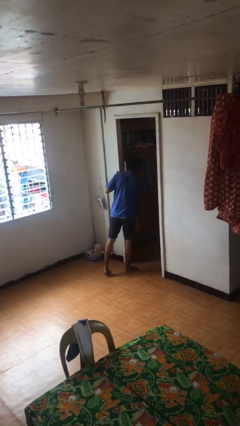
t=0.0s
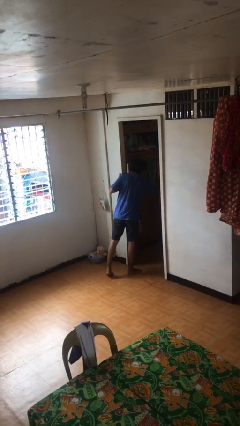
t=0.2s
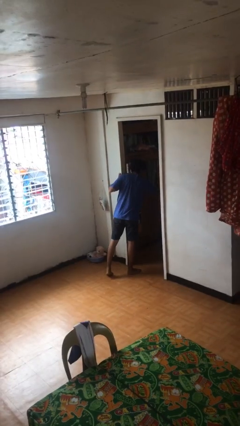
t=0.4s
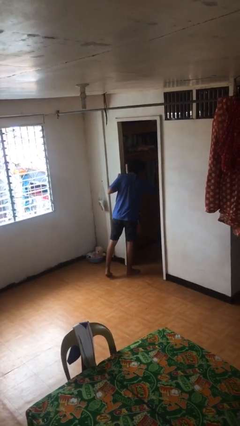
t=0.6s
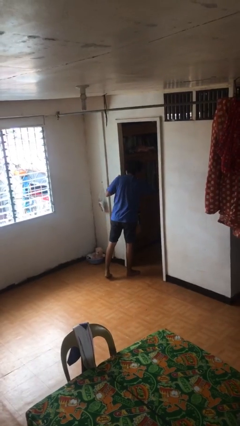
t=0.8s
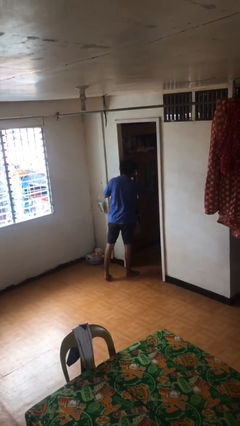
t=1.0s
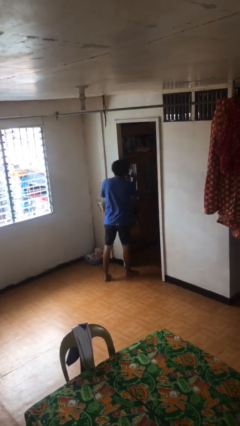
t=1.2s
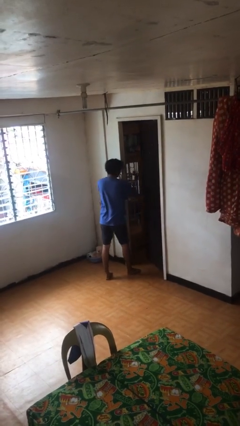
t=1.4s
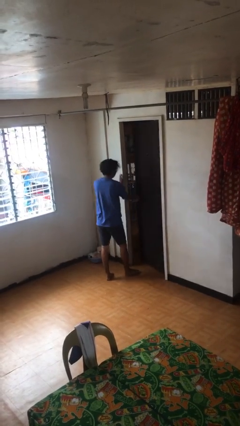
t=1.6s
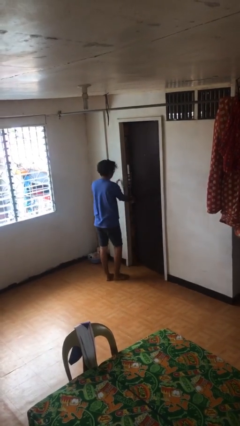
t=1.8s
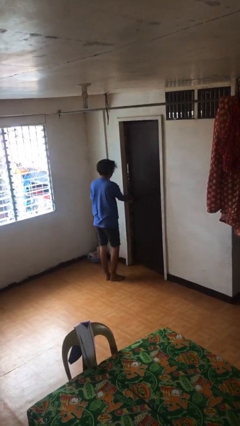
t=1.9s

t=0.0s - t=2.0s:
person closes facility door

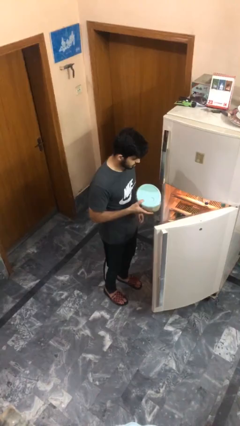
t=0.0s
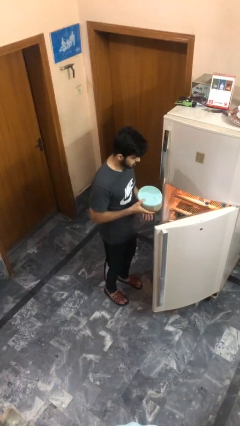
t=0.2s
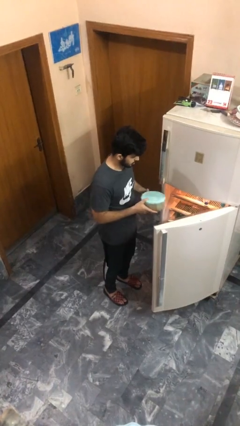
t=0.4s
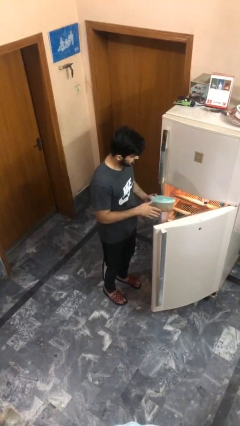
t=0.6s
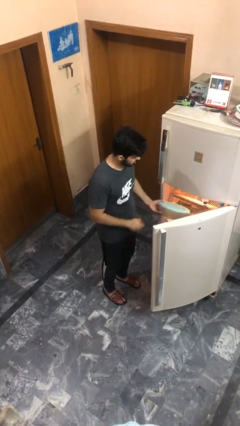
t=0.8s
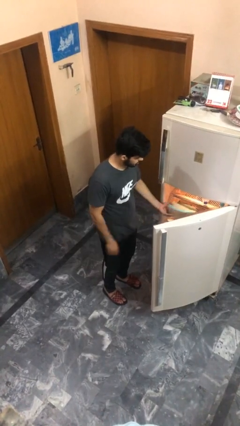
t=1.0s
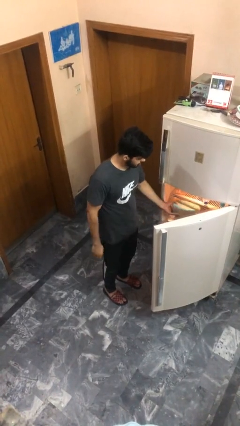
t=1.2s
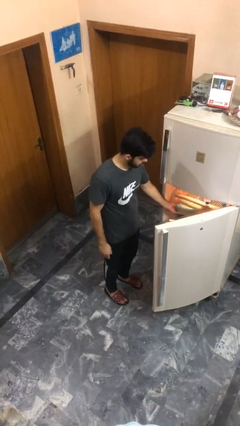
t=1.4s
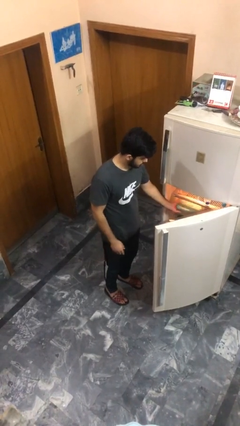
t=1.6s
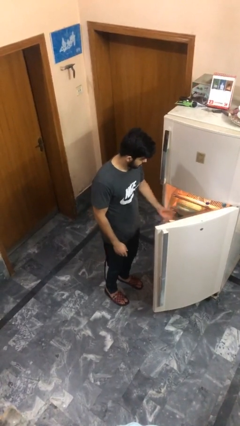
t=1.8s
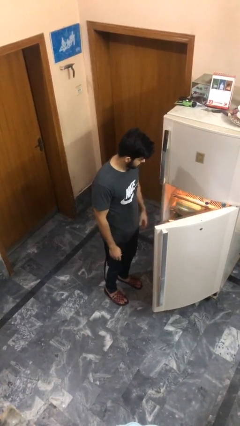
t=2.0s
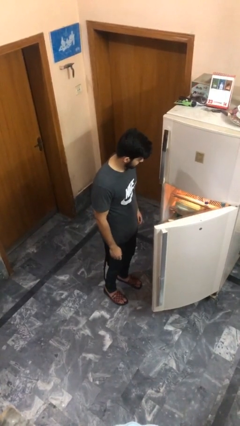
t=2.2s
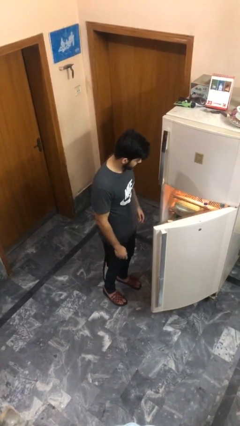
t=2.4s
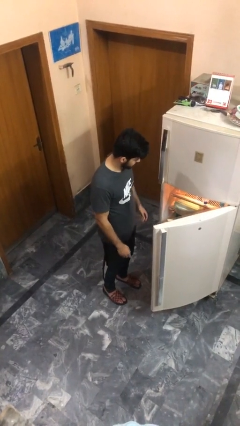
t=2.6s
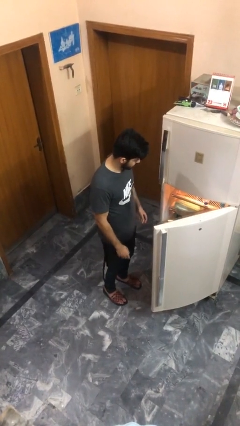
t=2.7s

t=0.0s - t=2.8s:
person puts down object into cabinet

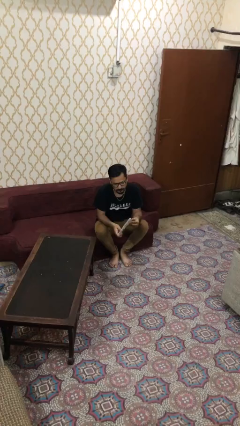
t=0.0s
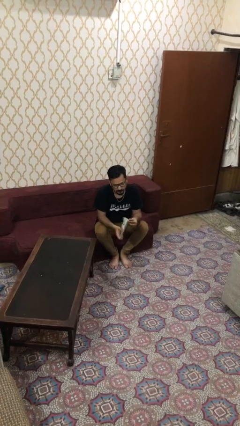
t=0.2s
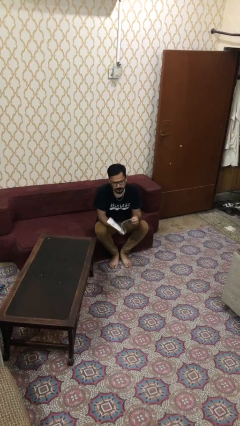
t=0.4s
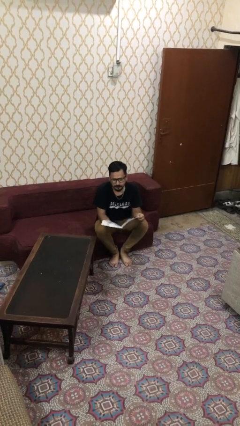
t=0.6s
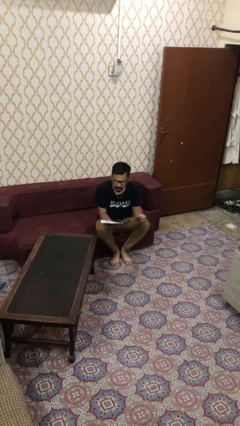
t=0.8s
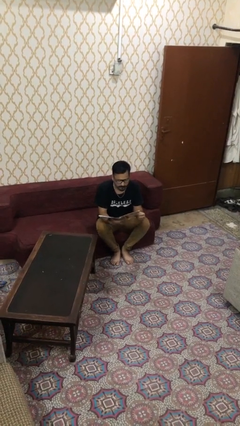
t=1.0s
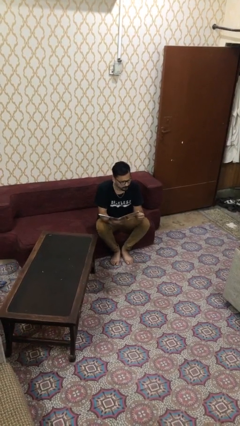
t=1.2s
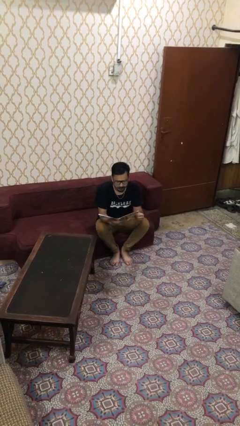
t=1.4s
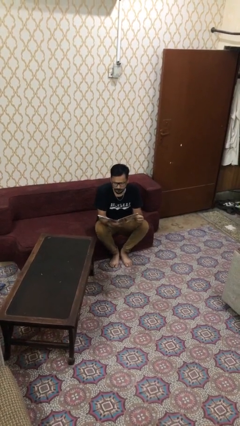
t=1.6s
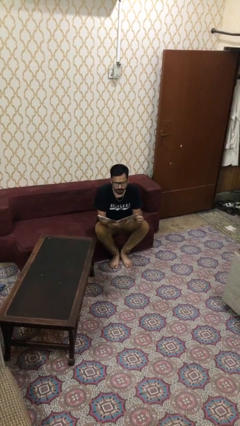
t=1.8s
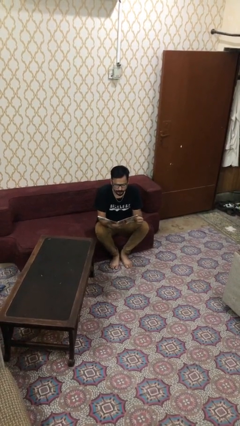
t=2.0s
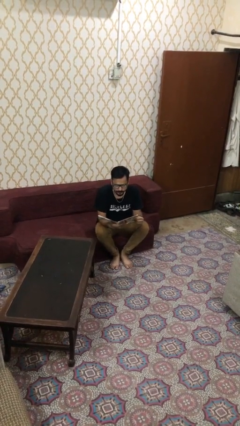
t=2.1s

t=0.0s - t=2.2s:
person reads document

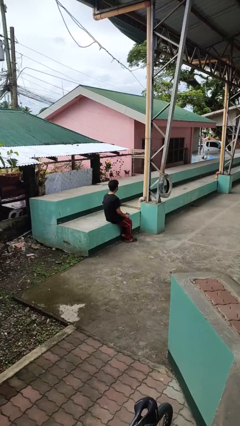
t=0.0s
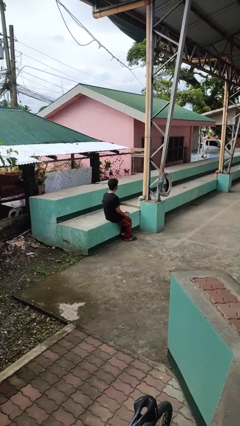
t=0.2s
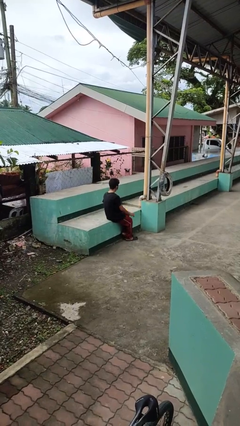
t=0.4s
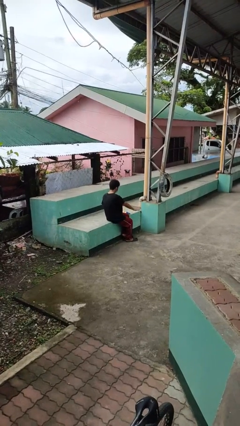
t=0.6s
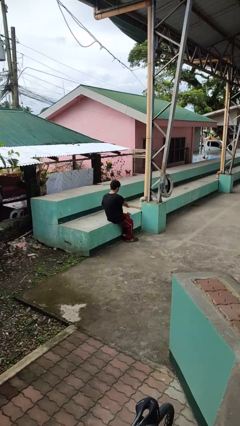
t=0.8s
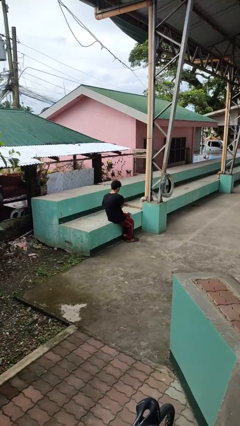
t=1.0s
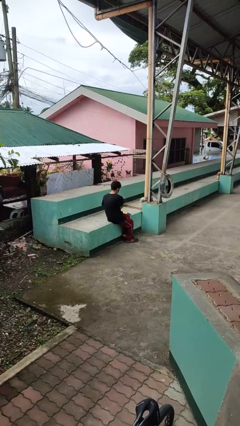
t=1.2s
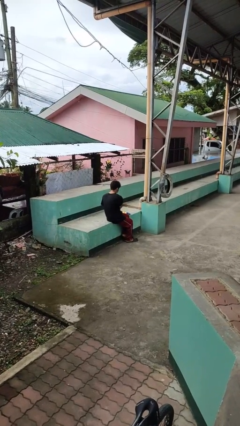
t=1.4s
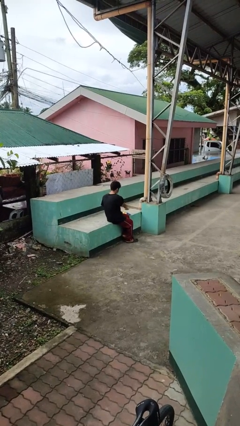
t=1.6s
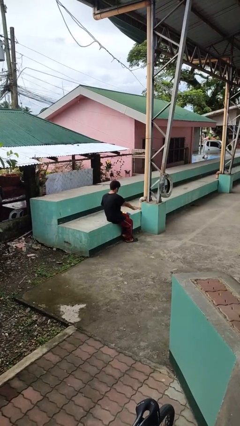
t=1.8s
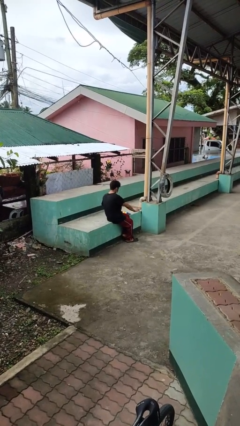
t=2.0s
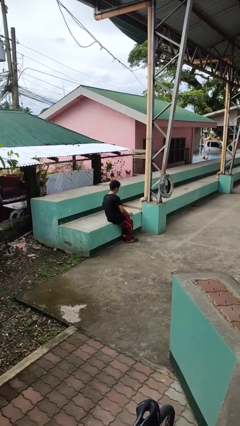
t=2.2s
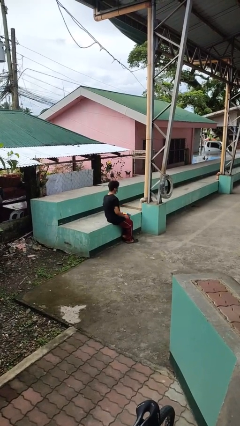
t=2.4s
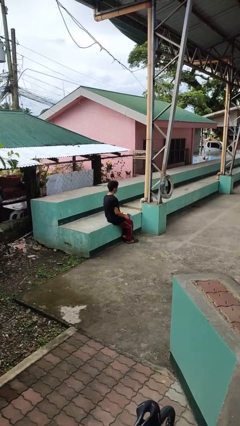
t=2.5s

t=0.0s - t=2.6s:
person waves hand over object

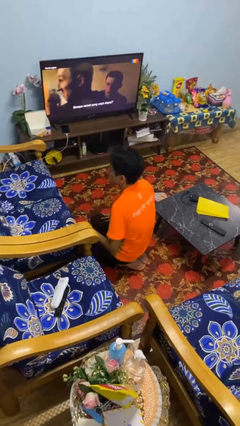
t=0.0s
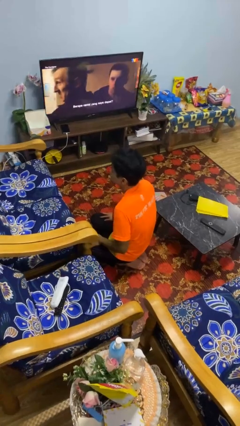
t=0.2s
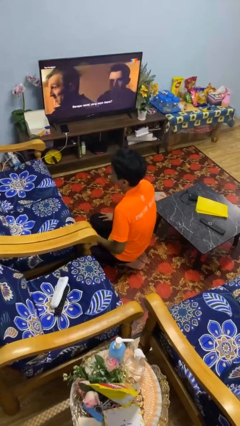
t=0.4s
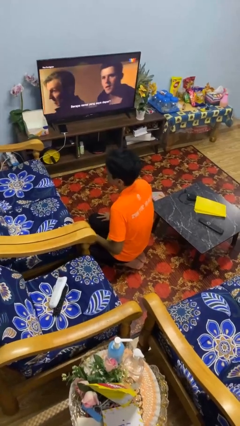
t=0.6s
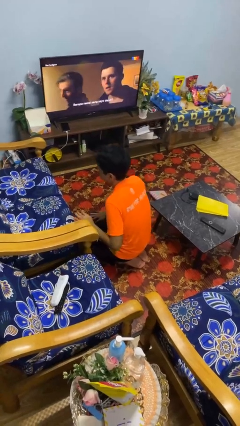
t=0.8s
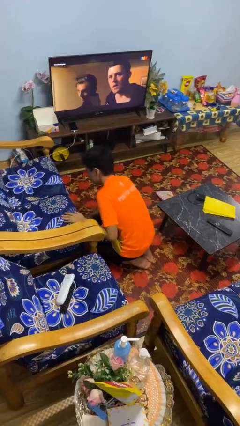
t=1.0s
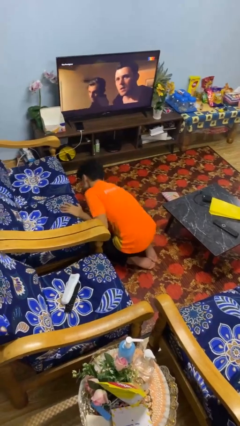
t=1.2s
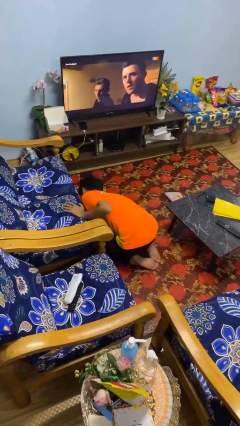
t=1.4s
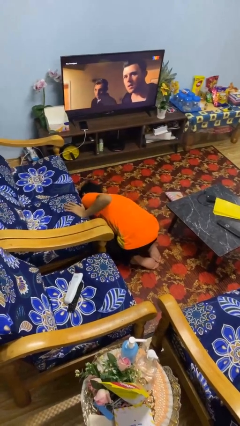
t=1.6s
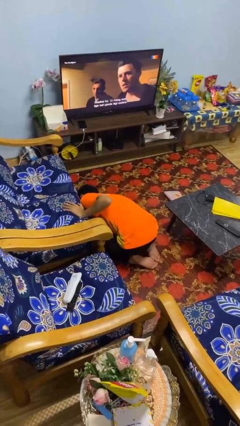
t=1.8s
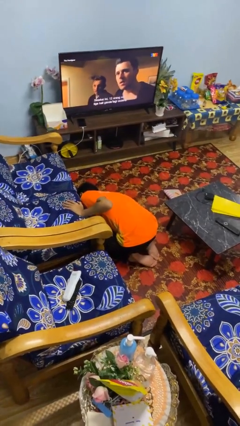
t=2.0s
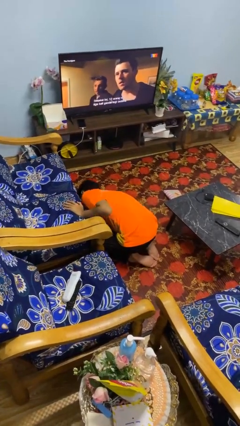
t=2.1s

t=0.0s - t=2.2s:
person searches under couch

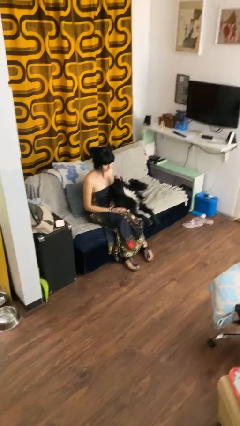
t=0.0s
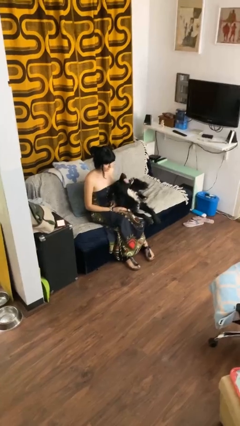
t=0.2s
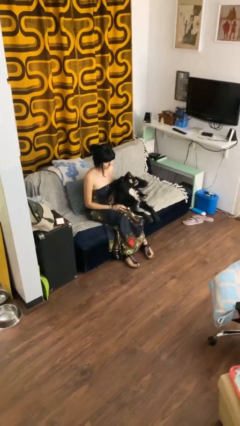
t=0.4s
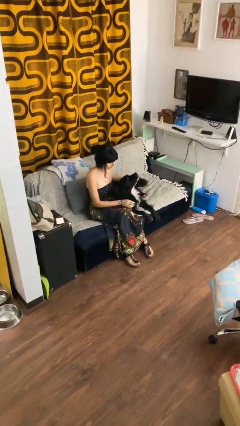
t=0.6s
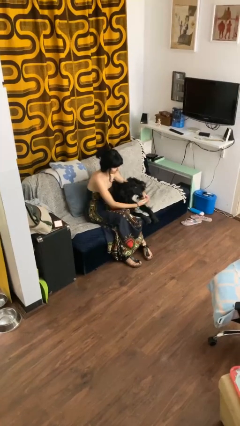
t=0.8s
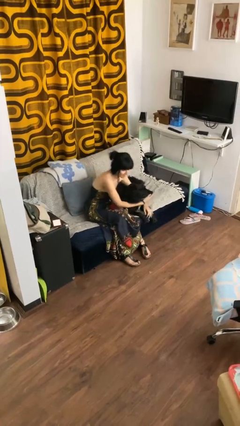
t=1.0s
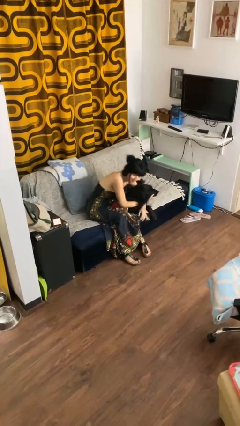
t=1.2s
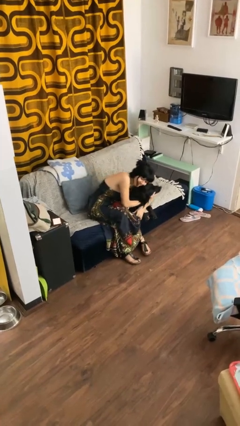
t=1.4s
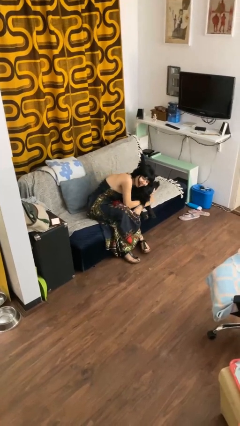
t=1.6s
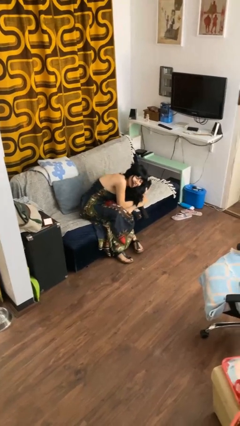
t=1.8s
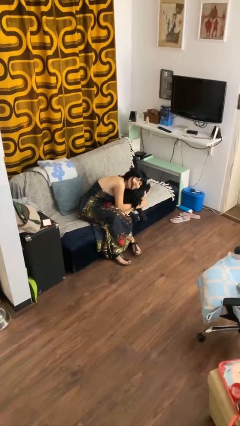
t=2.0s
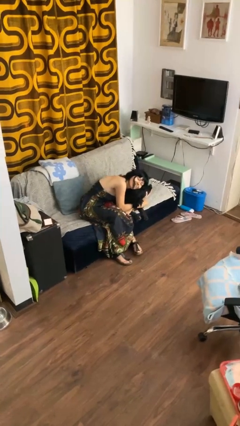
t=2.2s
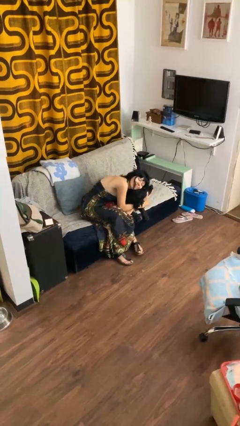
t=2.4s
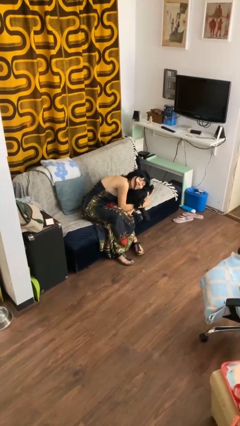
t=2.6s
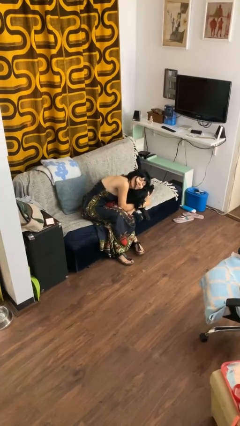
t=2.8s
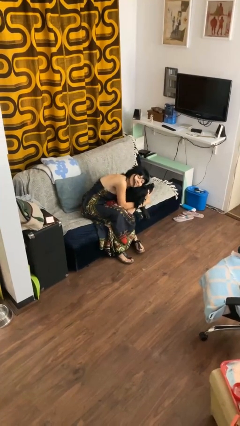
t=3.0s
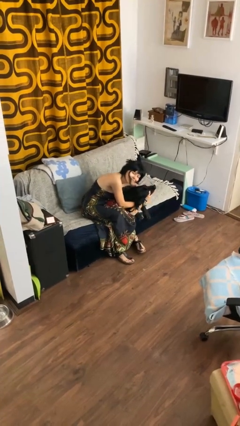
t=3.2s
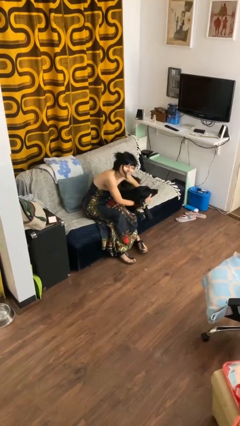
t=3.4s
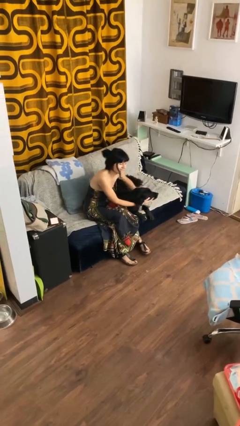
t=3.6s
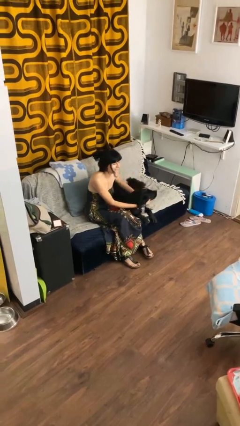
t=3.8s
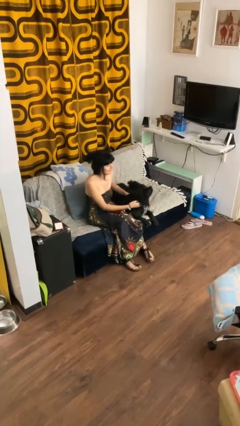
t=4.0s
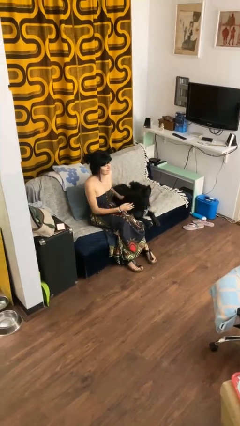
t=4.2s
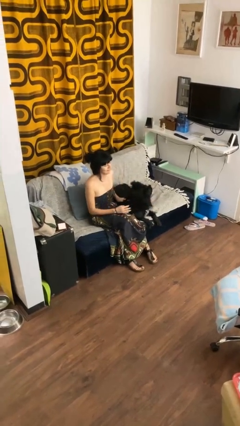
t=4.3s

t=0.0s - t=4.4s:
person hugs dog

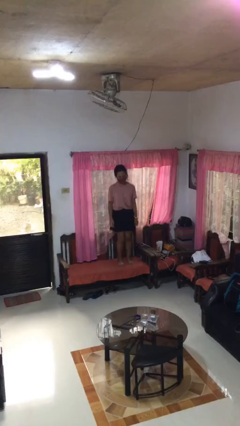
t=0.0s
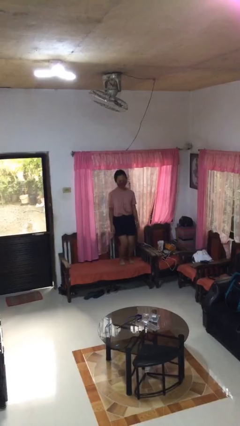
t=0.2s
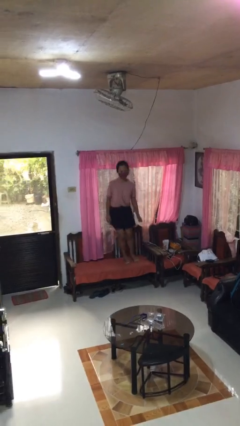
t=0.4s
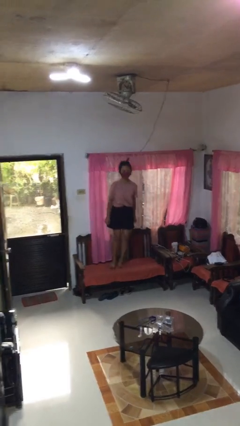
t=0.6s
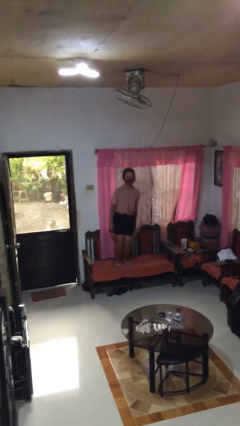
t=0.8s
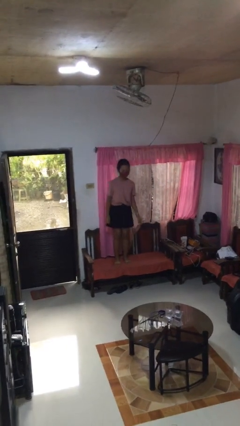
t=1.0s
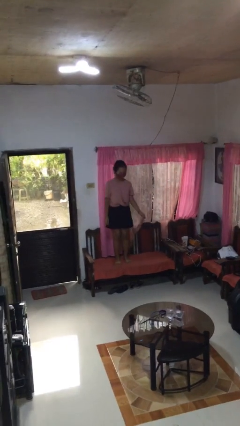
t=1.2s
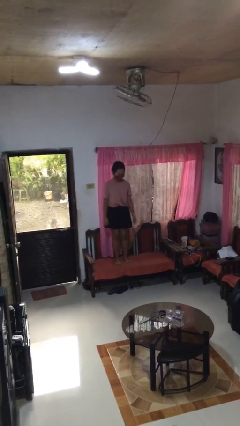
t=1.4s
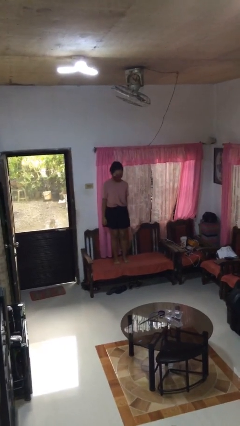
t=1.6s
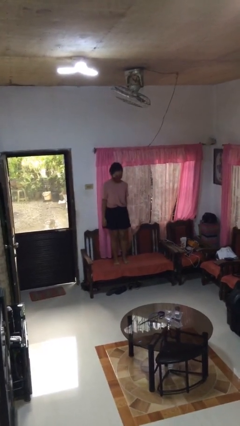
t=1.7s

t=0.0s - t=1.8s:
person jumps on couch
